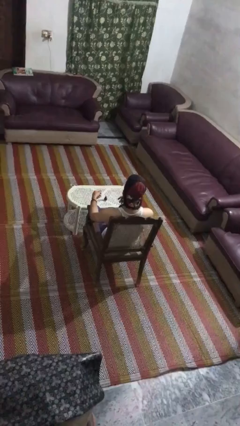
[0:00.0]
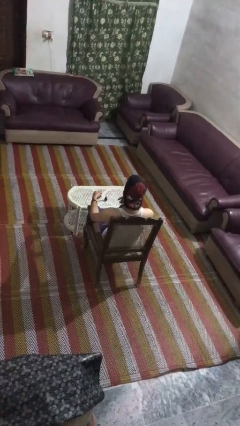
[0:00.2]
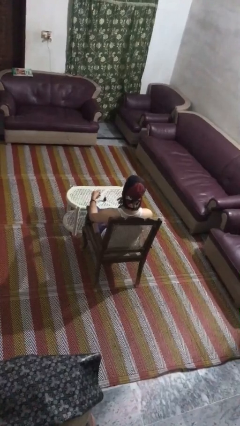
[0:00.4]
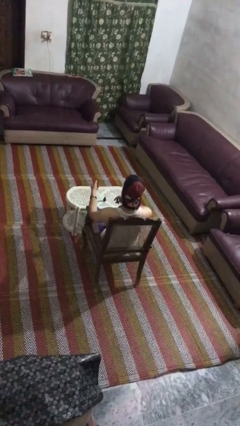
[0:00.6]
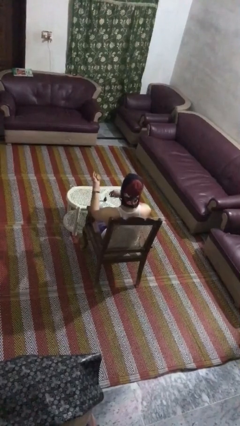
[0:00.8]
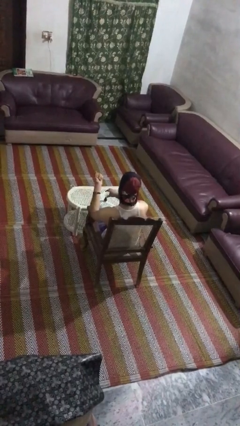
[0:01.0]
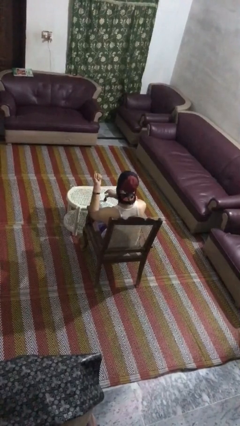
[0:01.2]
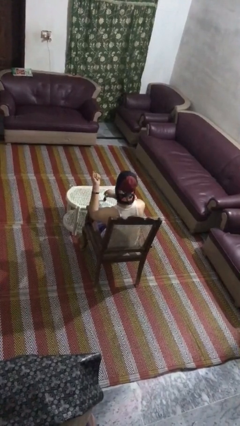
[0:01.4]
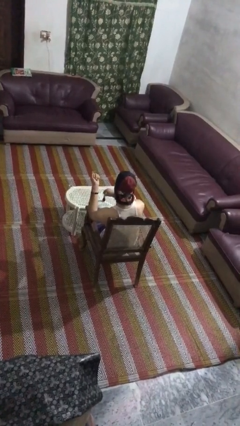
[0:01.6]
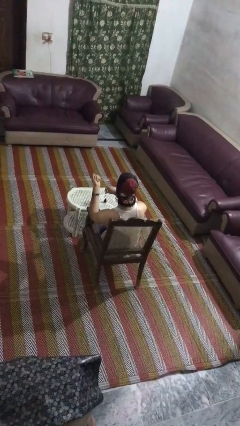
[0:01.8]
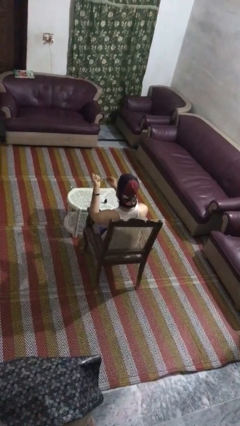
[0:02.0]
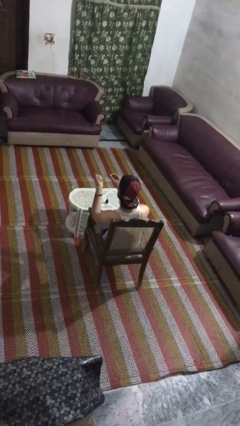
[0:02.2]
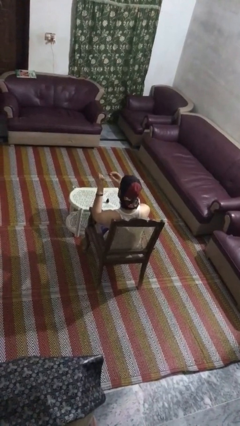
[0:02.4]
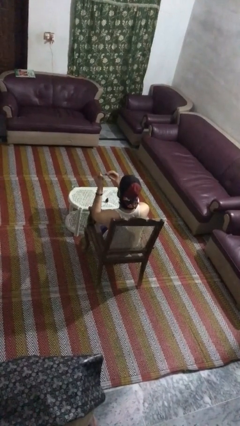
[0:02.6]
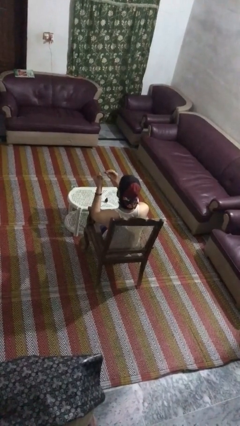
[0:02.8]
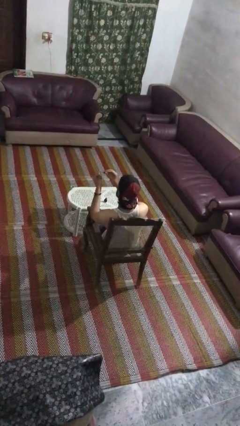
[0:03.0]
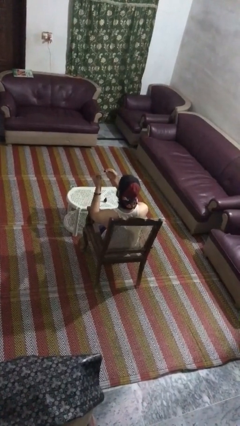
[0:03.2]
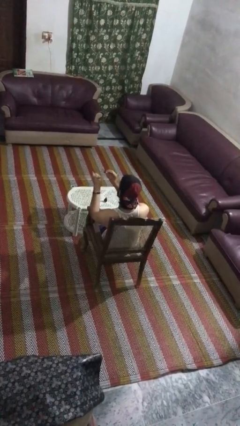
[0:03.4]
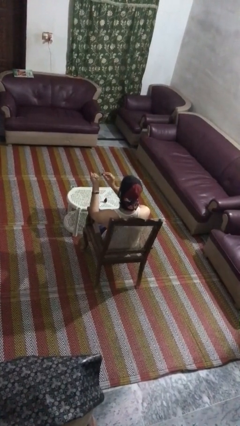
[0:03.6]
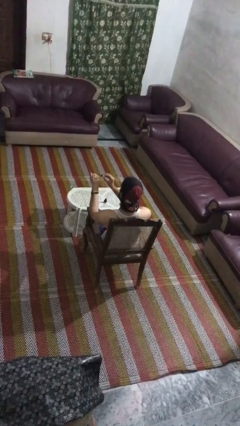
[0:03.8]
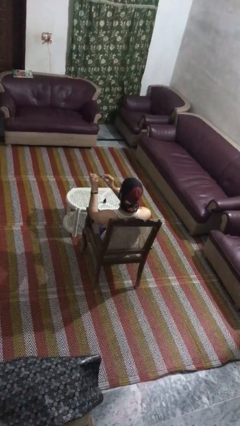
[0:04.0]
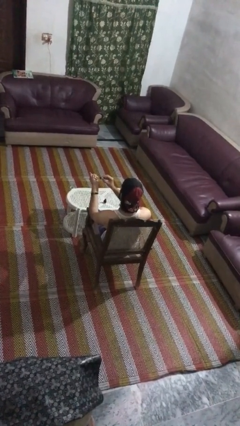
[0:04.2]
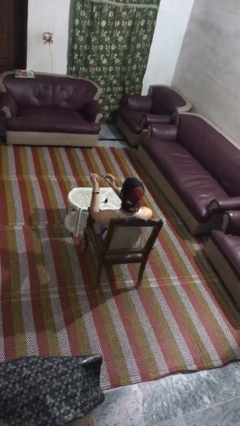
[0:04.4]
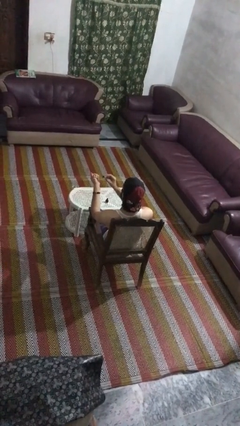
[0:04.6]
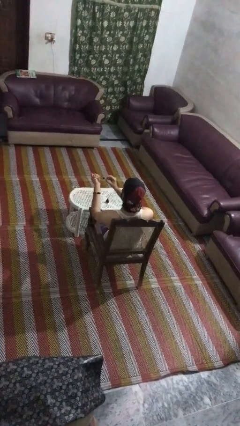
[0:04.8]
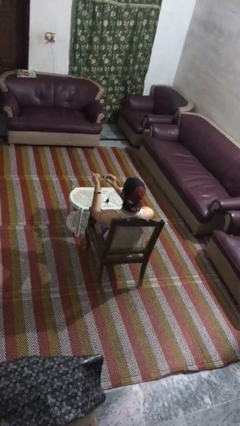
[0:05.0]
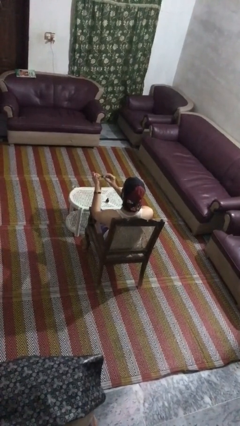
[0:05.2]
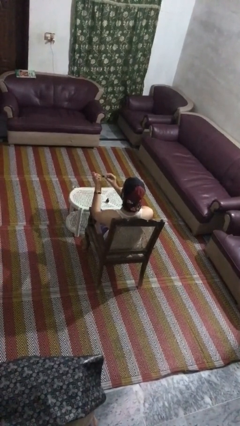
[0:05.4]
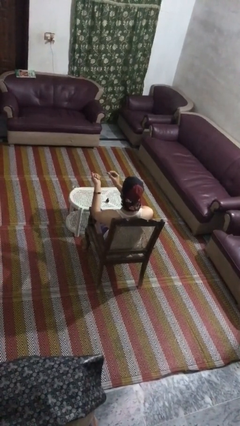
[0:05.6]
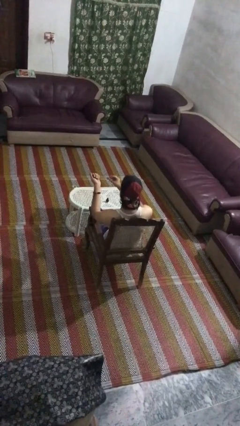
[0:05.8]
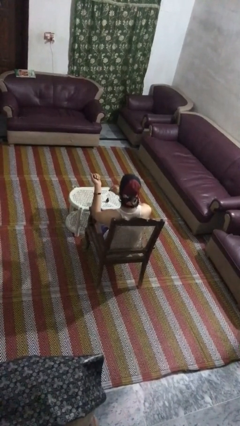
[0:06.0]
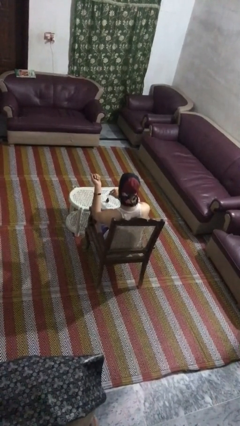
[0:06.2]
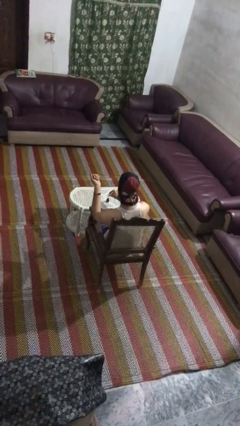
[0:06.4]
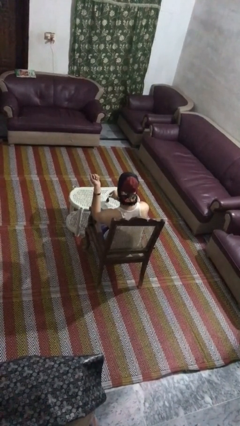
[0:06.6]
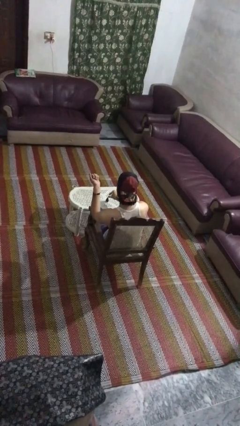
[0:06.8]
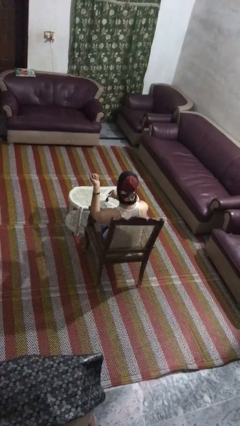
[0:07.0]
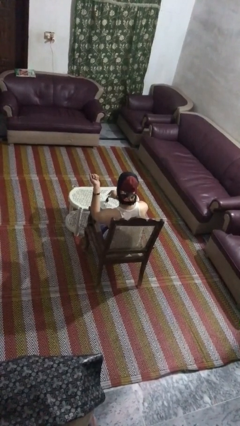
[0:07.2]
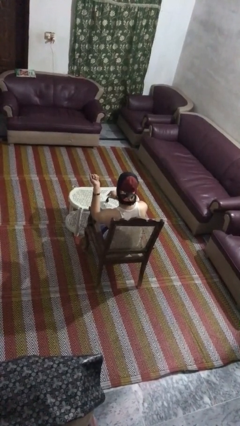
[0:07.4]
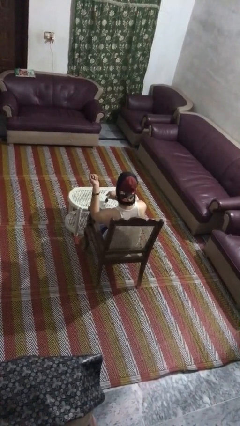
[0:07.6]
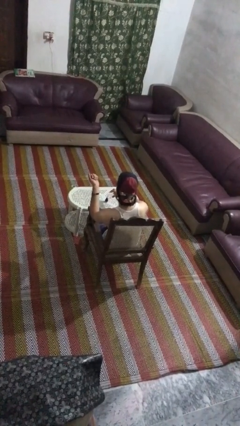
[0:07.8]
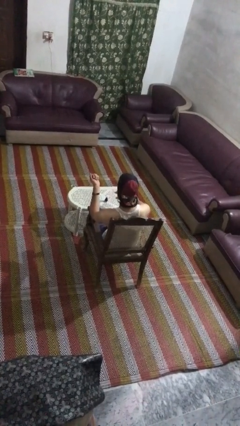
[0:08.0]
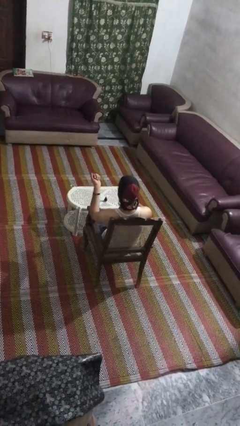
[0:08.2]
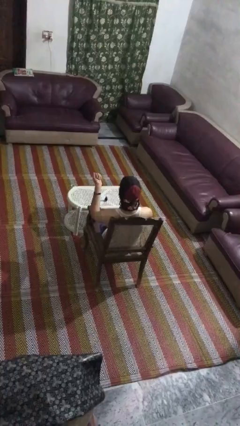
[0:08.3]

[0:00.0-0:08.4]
person paints fingernails

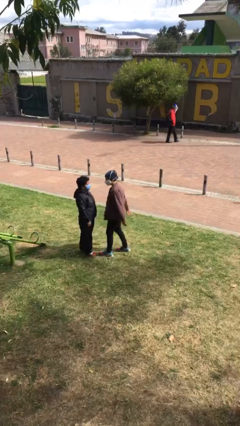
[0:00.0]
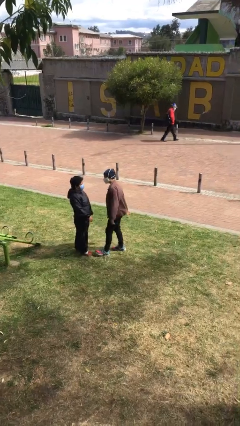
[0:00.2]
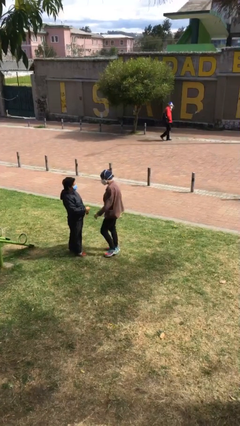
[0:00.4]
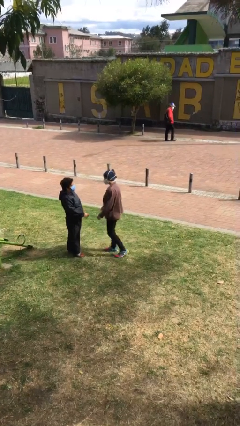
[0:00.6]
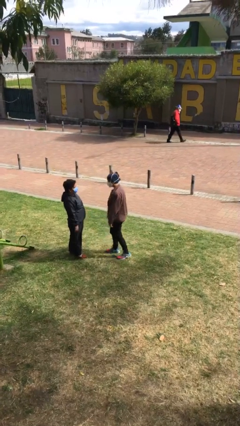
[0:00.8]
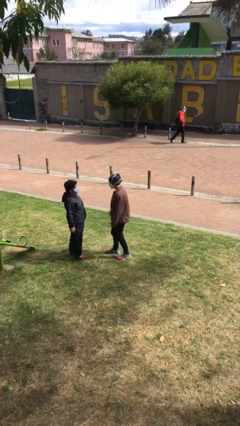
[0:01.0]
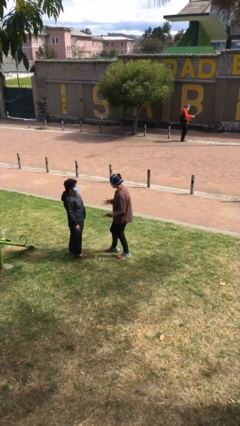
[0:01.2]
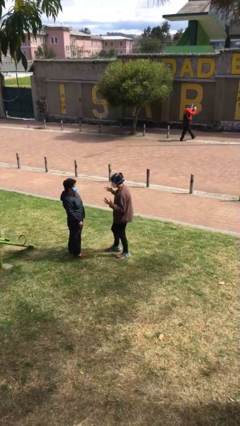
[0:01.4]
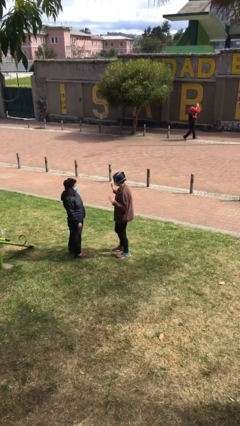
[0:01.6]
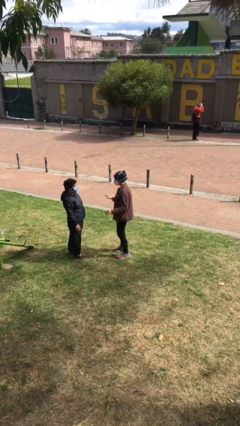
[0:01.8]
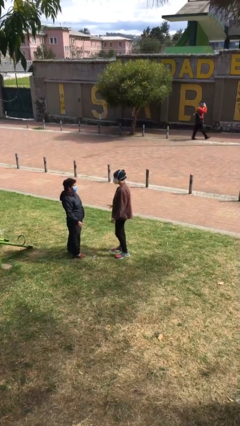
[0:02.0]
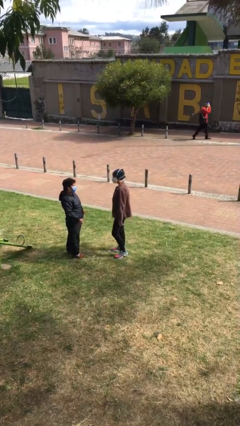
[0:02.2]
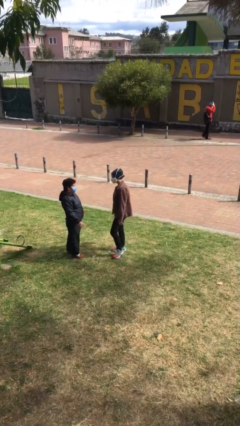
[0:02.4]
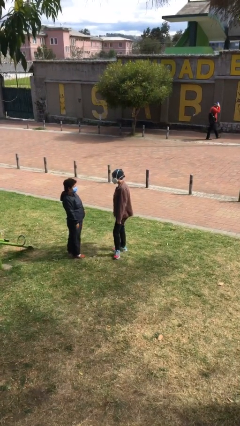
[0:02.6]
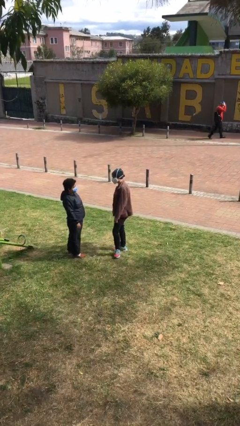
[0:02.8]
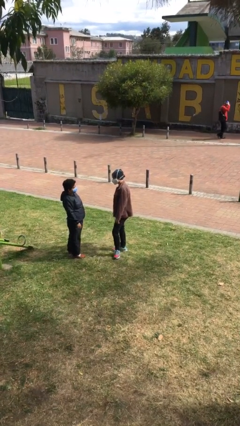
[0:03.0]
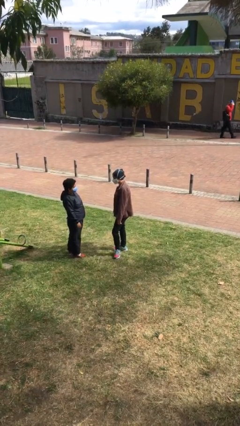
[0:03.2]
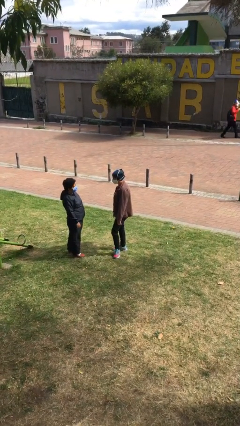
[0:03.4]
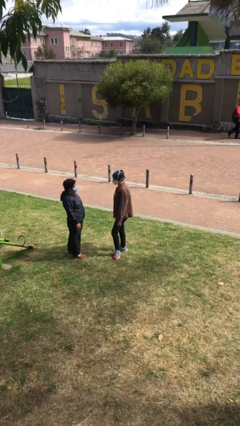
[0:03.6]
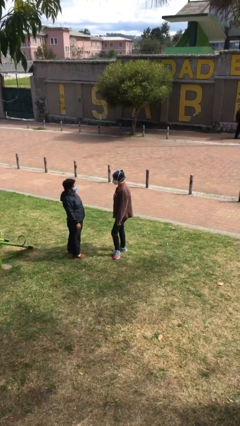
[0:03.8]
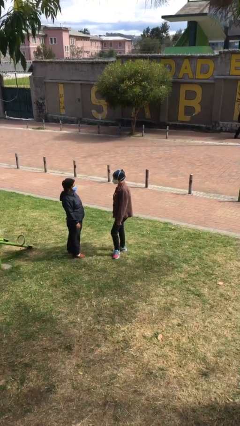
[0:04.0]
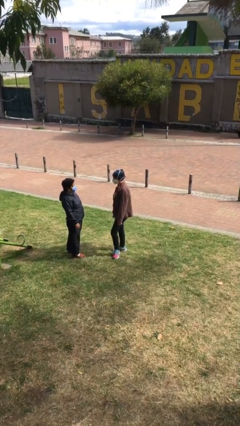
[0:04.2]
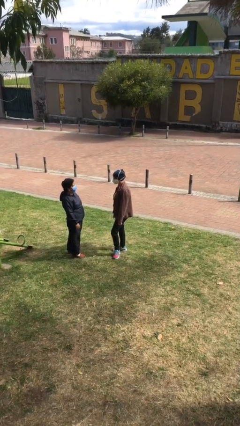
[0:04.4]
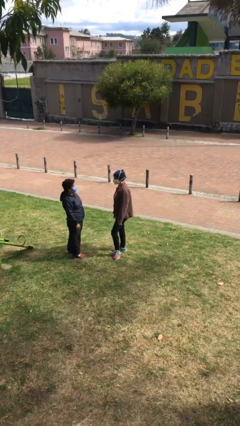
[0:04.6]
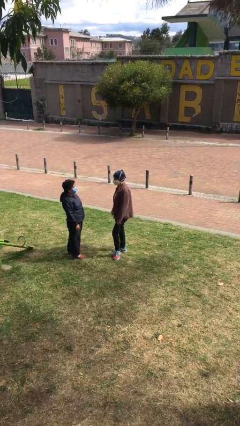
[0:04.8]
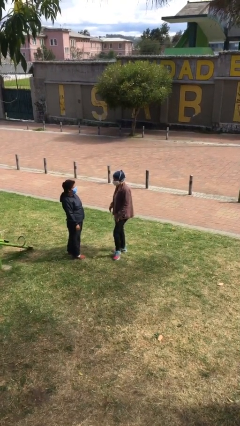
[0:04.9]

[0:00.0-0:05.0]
person talks to person

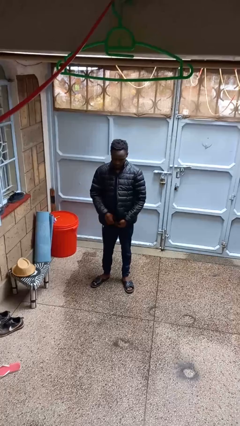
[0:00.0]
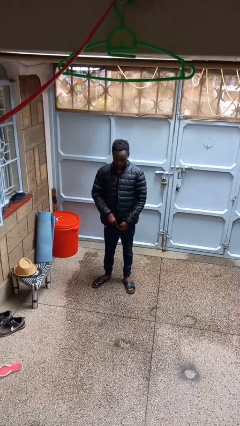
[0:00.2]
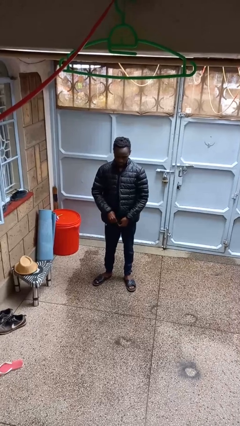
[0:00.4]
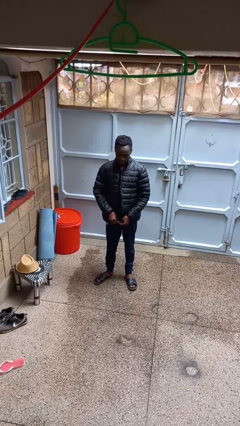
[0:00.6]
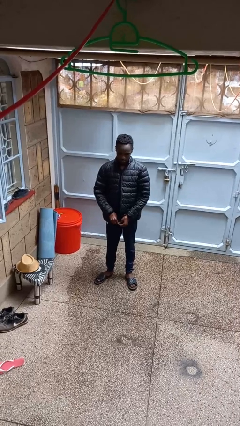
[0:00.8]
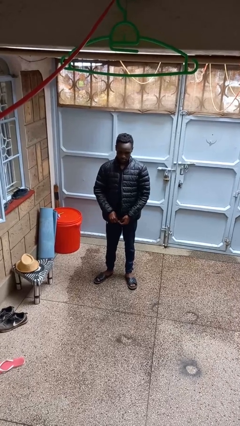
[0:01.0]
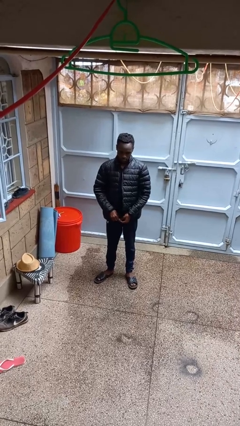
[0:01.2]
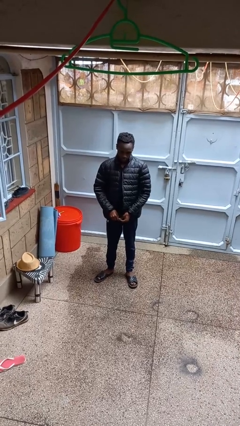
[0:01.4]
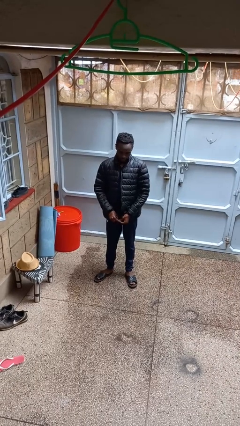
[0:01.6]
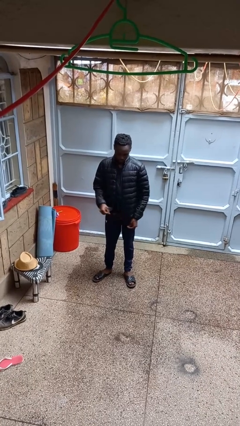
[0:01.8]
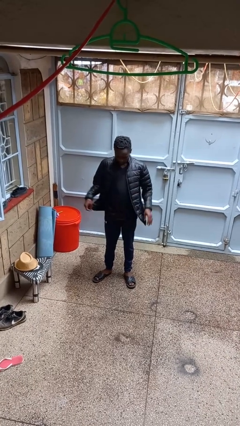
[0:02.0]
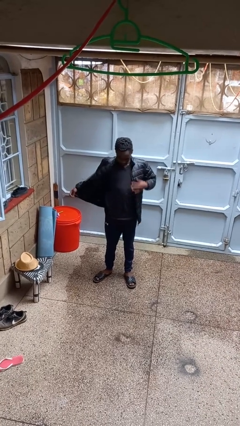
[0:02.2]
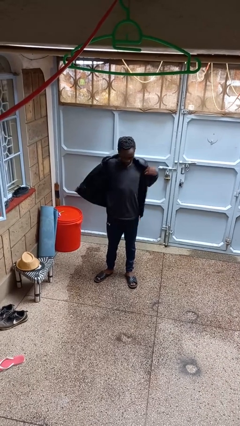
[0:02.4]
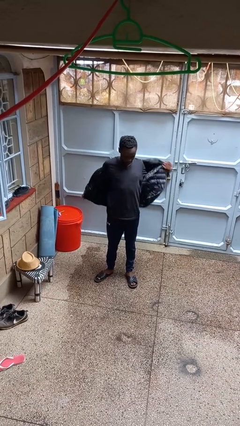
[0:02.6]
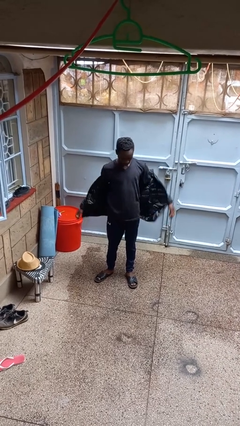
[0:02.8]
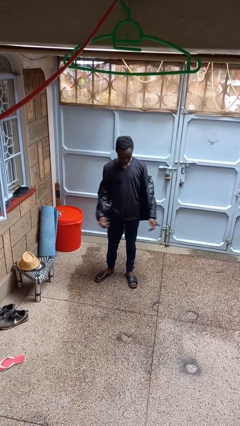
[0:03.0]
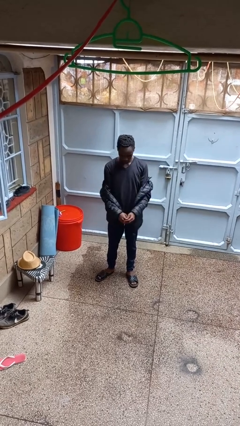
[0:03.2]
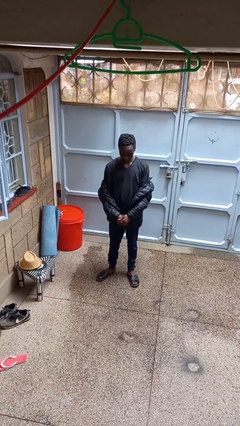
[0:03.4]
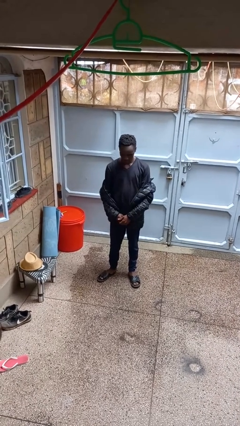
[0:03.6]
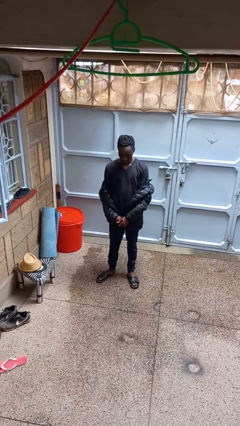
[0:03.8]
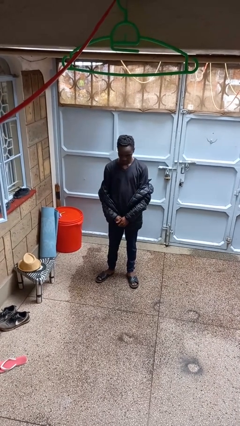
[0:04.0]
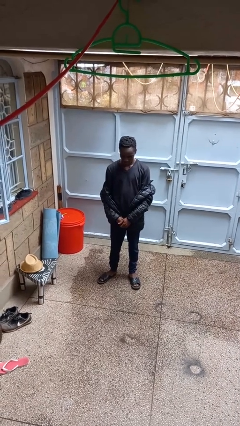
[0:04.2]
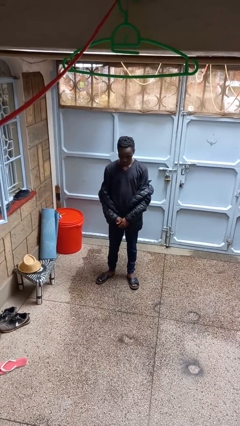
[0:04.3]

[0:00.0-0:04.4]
person takes off jacket

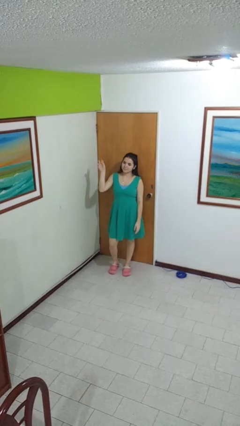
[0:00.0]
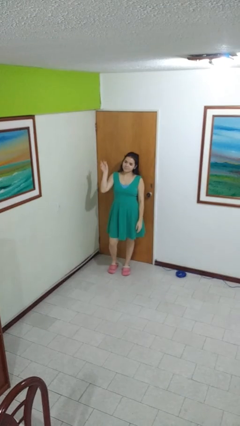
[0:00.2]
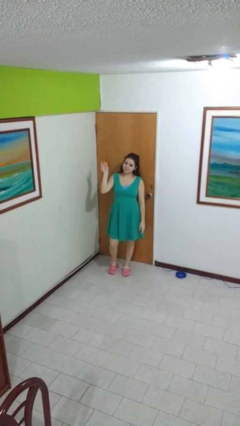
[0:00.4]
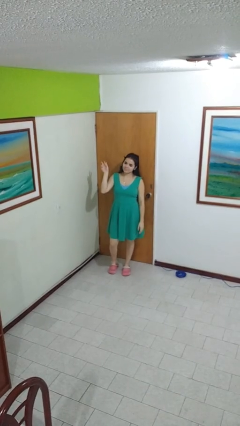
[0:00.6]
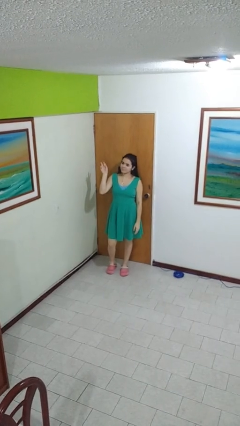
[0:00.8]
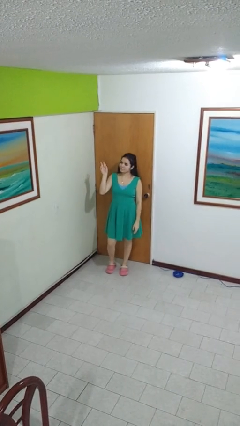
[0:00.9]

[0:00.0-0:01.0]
person gestures peace
